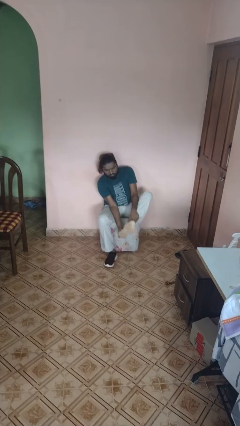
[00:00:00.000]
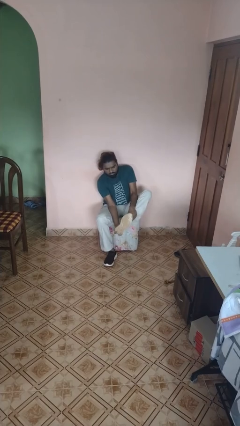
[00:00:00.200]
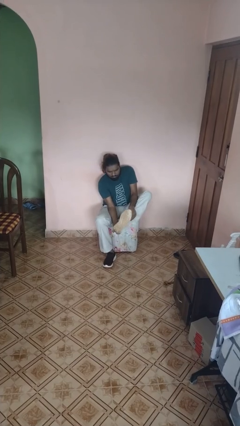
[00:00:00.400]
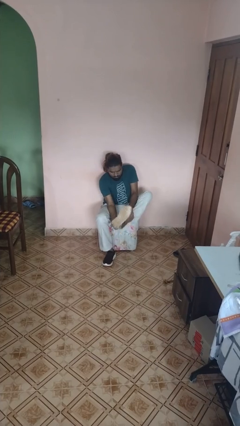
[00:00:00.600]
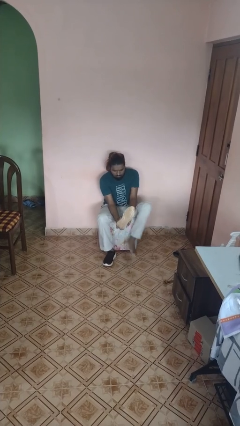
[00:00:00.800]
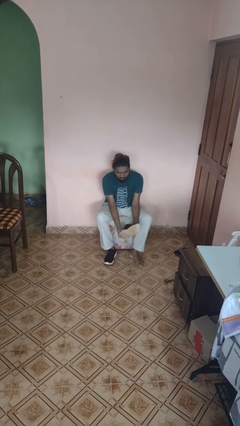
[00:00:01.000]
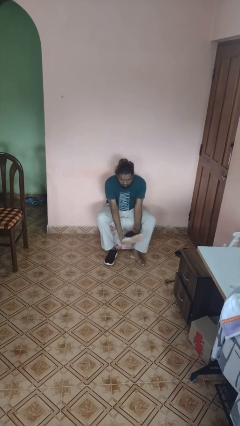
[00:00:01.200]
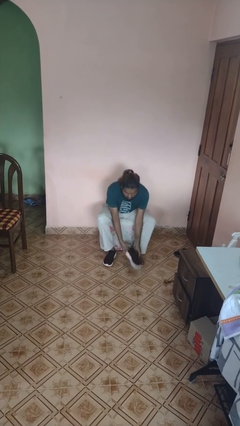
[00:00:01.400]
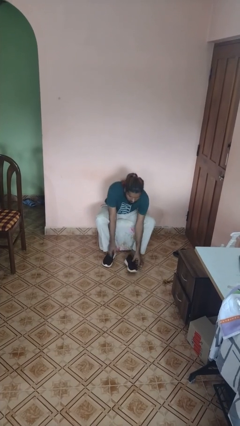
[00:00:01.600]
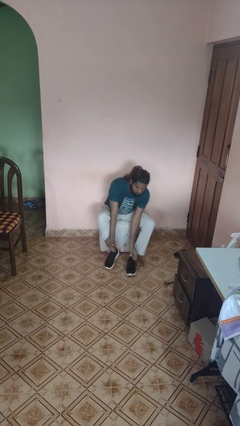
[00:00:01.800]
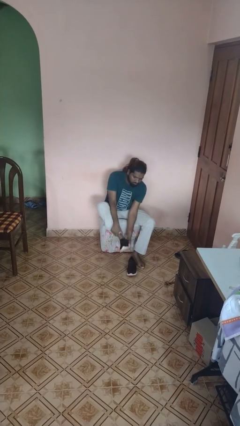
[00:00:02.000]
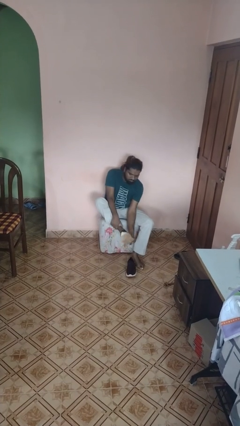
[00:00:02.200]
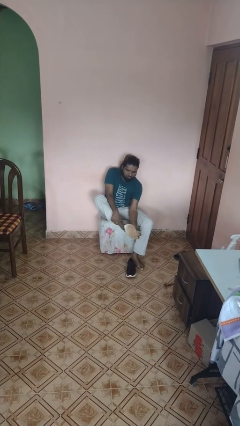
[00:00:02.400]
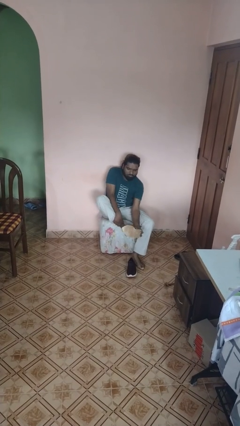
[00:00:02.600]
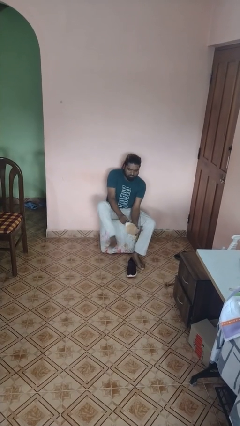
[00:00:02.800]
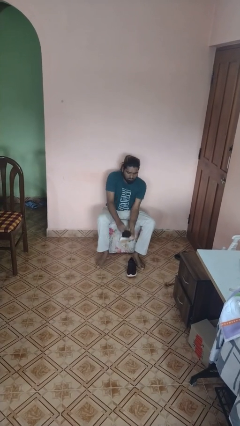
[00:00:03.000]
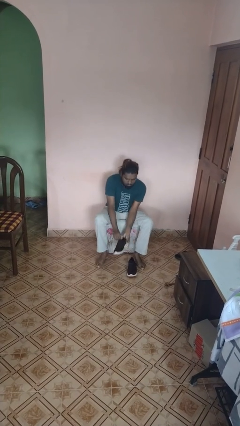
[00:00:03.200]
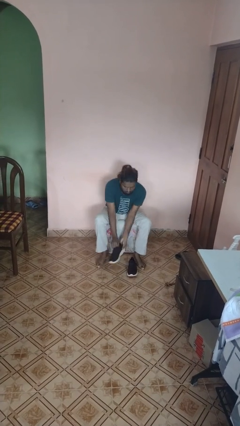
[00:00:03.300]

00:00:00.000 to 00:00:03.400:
person takes off shoes

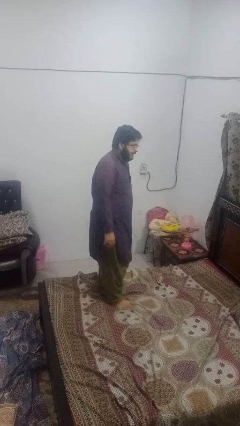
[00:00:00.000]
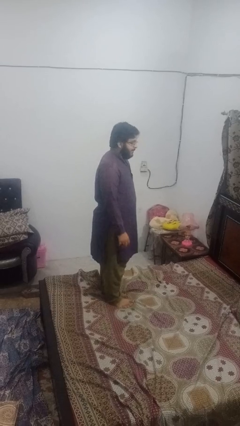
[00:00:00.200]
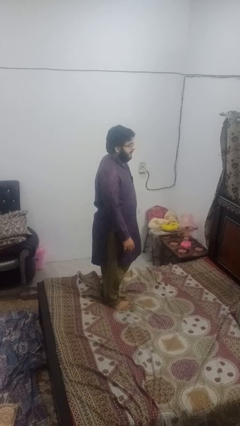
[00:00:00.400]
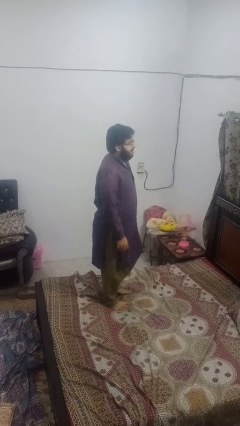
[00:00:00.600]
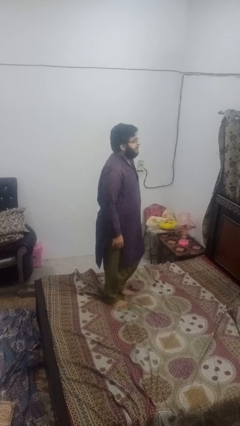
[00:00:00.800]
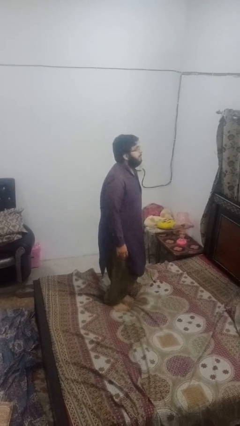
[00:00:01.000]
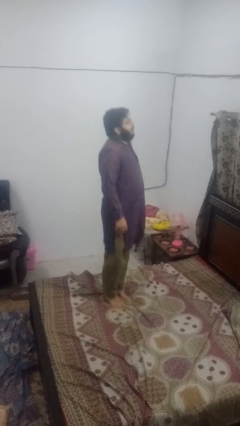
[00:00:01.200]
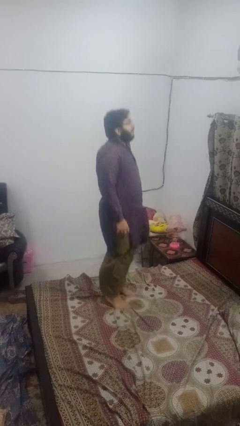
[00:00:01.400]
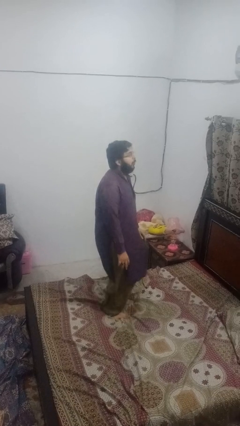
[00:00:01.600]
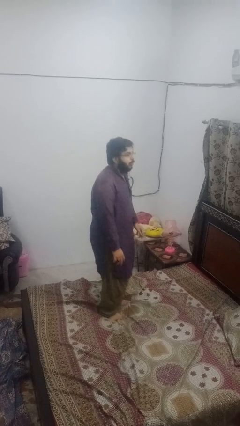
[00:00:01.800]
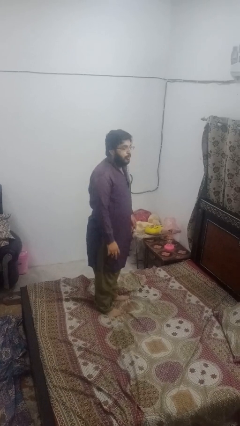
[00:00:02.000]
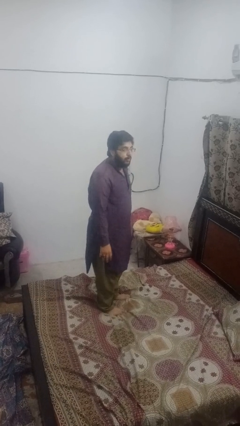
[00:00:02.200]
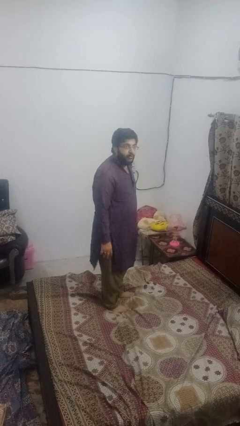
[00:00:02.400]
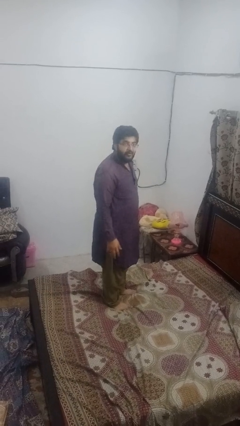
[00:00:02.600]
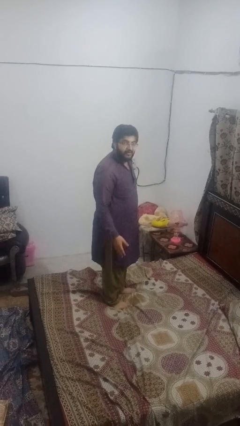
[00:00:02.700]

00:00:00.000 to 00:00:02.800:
person jumps on bed

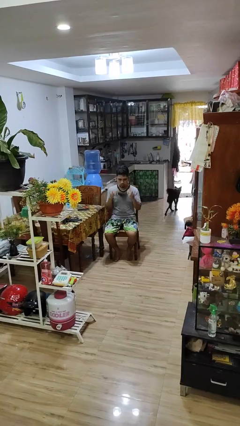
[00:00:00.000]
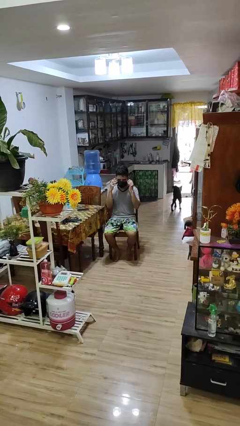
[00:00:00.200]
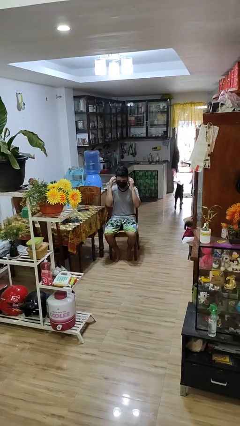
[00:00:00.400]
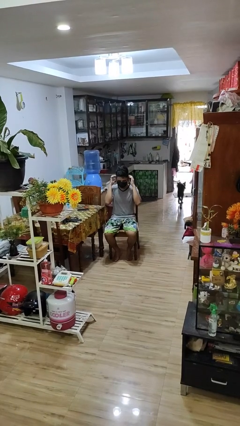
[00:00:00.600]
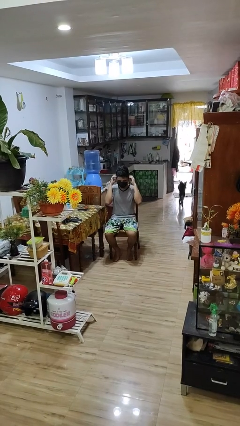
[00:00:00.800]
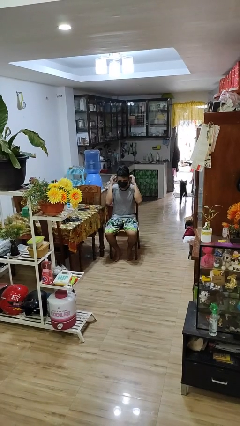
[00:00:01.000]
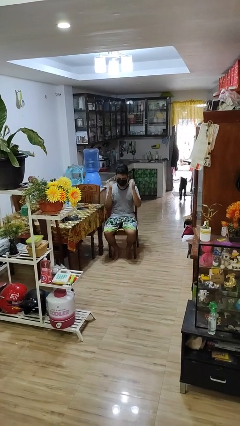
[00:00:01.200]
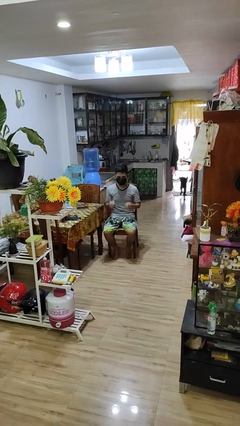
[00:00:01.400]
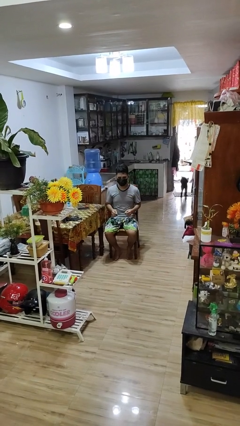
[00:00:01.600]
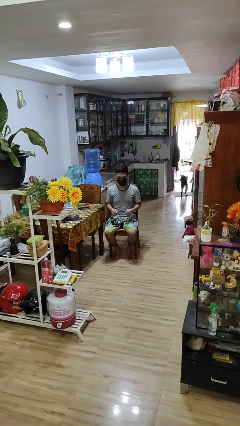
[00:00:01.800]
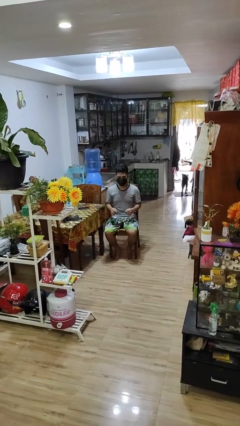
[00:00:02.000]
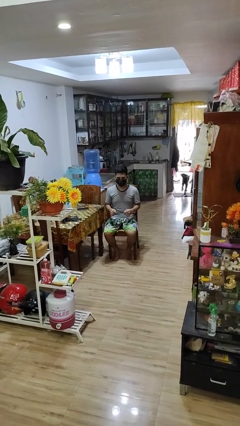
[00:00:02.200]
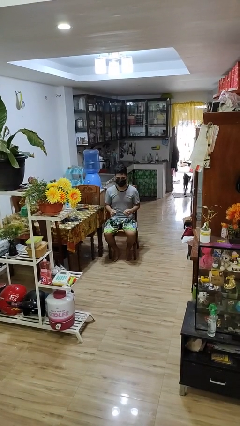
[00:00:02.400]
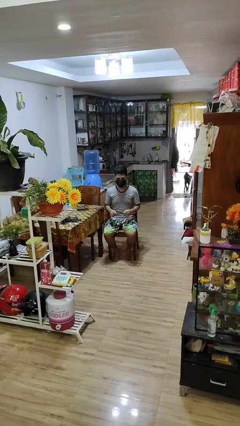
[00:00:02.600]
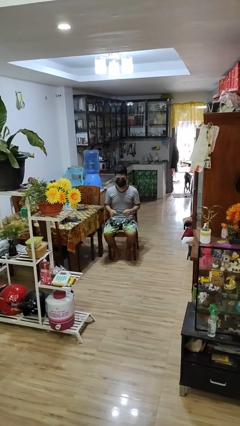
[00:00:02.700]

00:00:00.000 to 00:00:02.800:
person puts on facemask

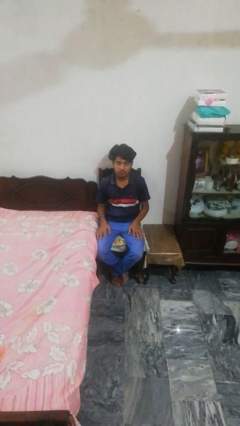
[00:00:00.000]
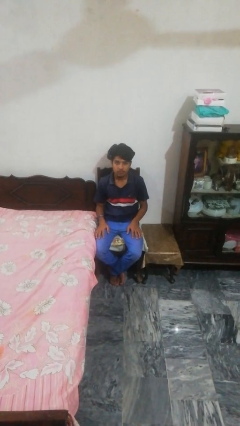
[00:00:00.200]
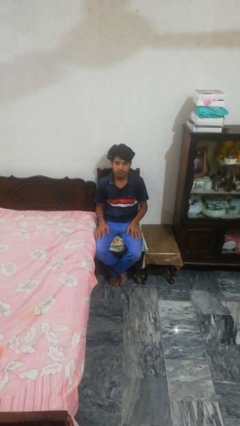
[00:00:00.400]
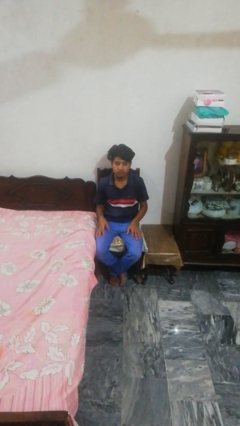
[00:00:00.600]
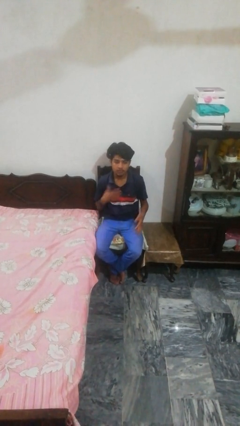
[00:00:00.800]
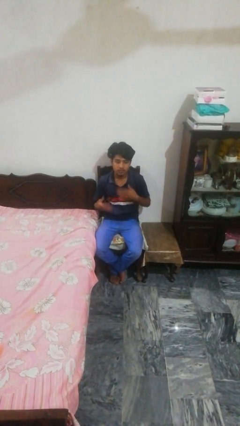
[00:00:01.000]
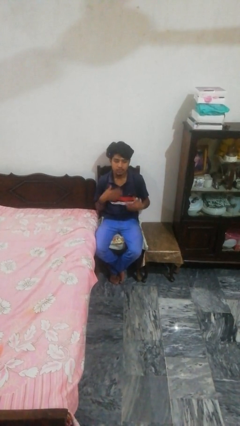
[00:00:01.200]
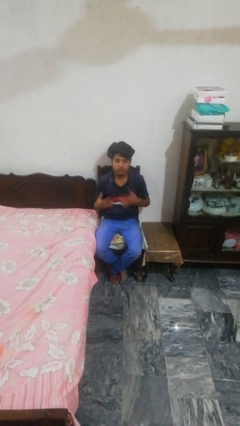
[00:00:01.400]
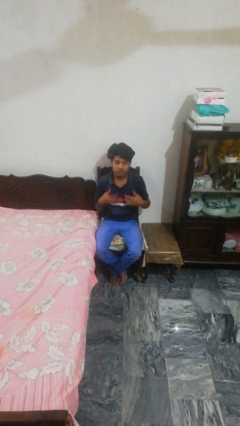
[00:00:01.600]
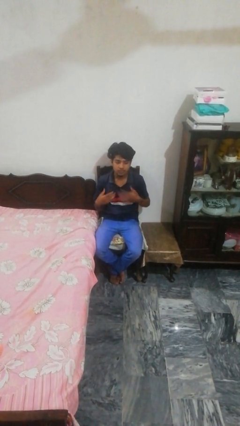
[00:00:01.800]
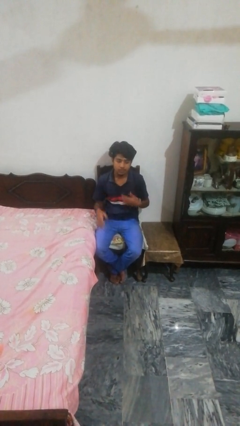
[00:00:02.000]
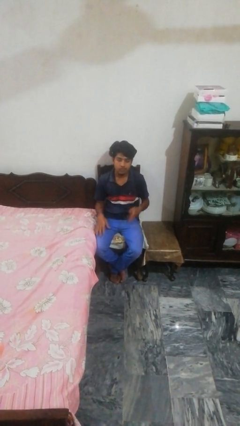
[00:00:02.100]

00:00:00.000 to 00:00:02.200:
person drums on chest

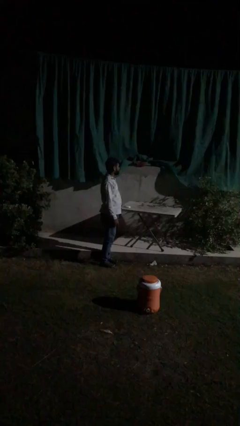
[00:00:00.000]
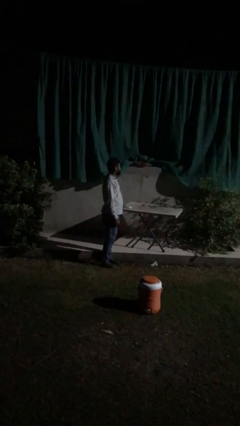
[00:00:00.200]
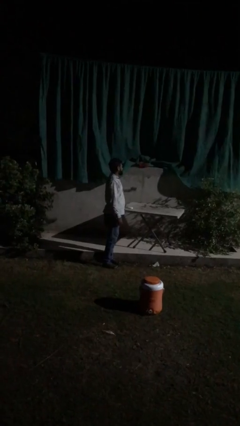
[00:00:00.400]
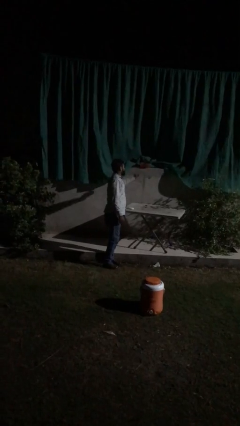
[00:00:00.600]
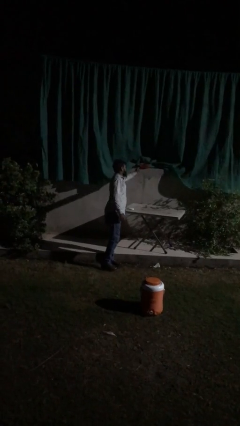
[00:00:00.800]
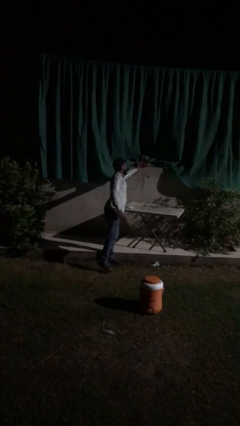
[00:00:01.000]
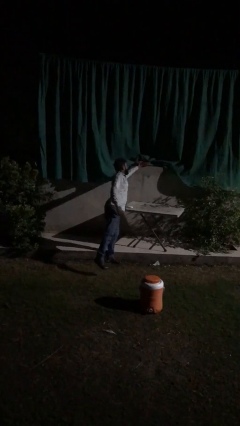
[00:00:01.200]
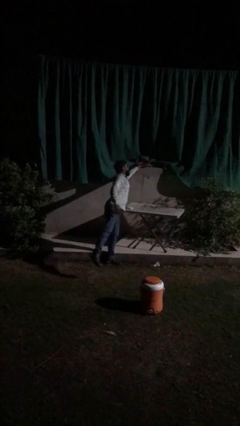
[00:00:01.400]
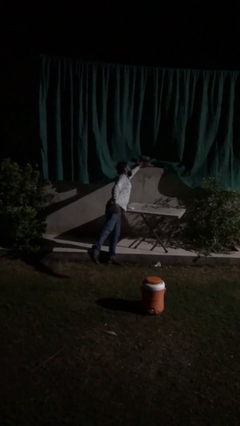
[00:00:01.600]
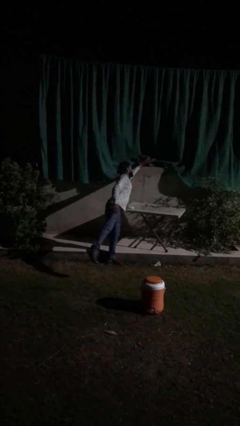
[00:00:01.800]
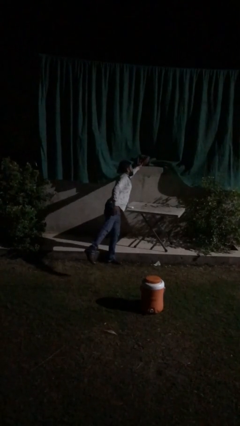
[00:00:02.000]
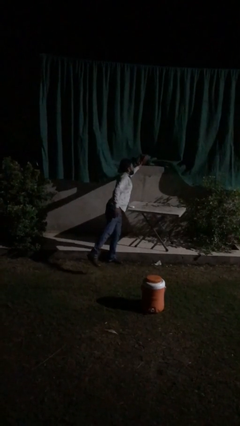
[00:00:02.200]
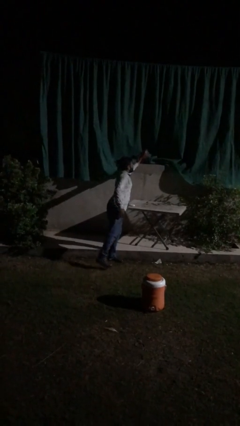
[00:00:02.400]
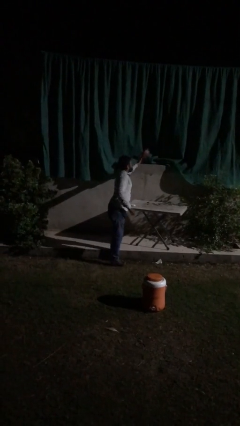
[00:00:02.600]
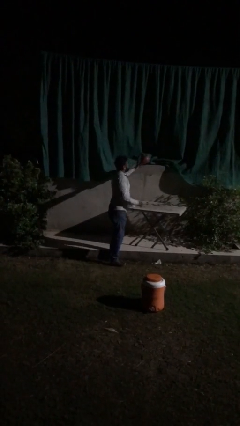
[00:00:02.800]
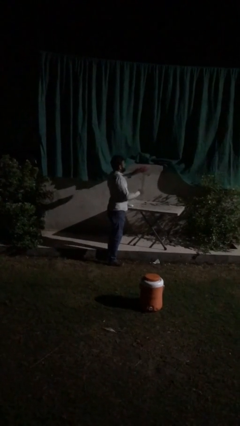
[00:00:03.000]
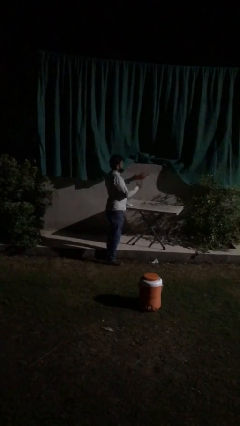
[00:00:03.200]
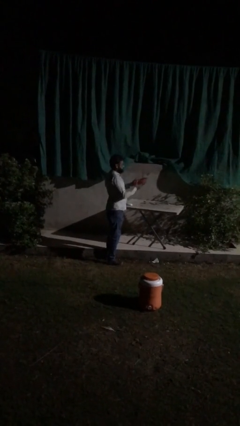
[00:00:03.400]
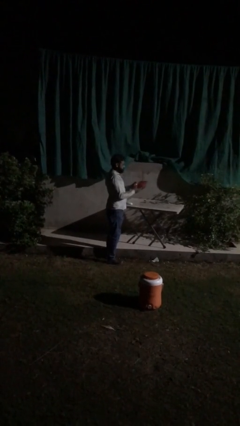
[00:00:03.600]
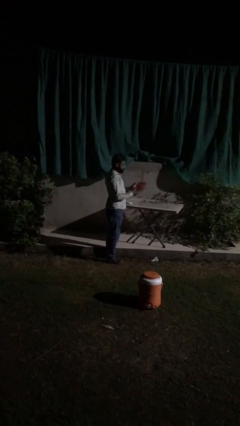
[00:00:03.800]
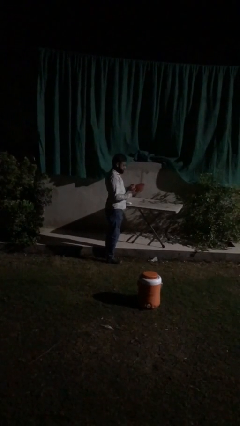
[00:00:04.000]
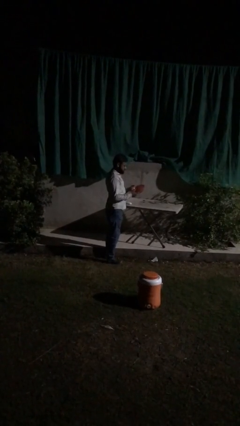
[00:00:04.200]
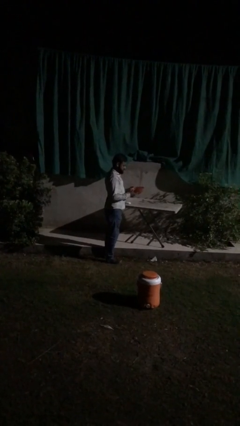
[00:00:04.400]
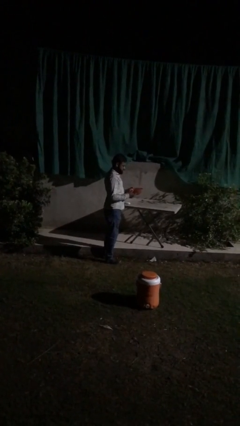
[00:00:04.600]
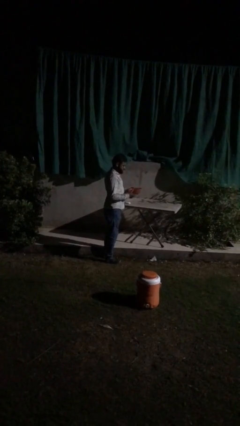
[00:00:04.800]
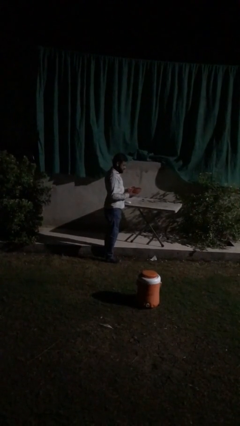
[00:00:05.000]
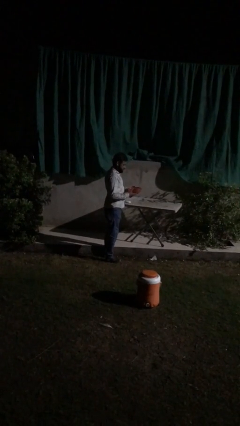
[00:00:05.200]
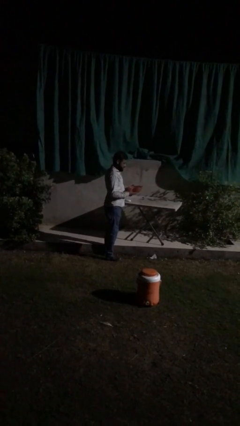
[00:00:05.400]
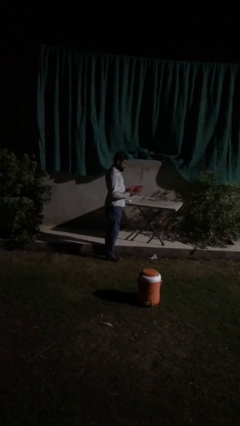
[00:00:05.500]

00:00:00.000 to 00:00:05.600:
person picks up object from shelf

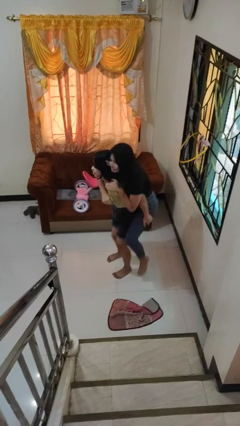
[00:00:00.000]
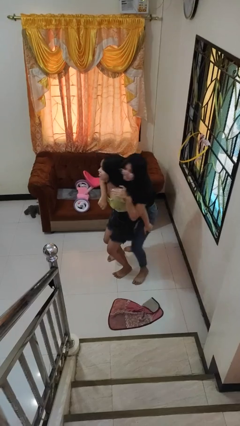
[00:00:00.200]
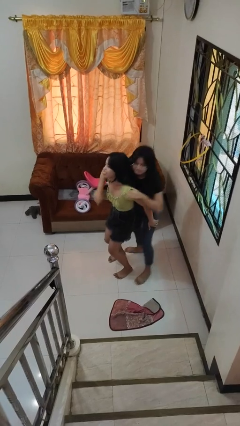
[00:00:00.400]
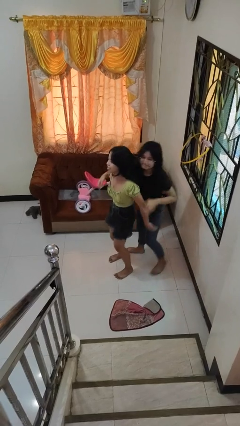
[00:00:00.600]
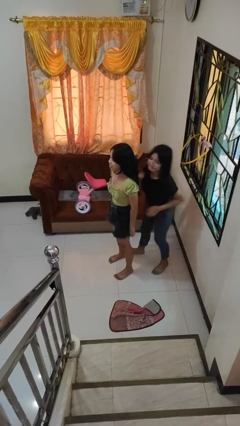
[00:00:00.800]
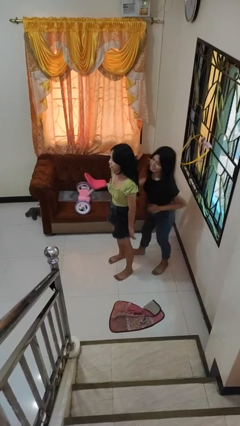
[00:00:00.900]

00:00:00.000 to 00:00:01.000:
person puts down person
